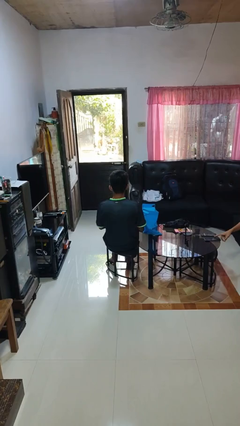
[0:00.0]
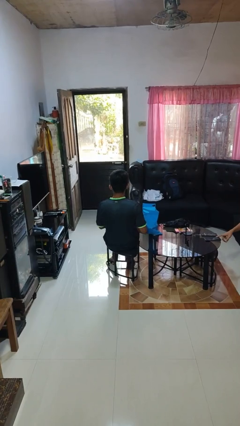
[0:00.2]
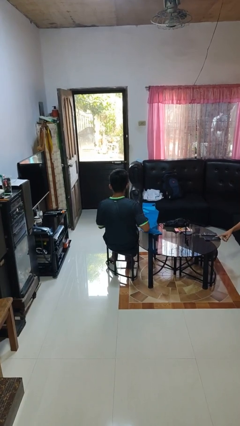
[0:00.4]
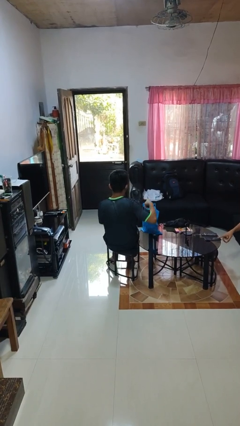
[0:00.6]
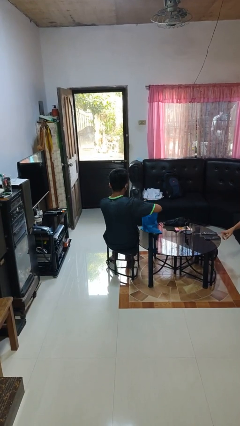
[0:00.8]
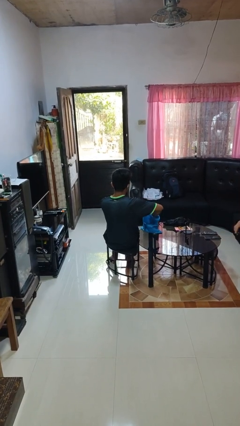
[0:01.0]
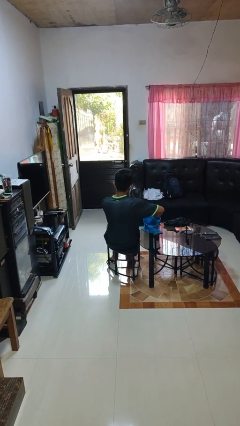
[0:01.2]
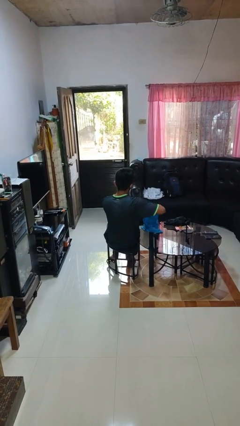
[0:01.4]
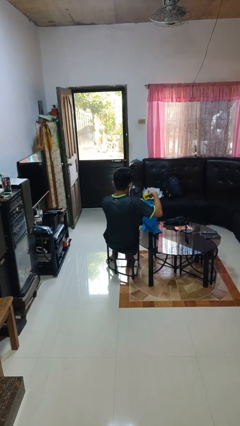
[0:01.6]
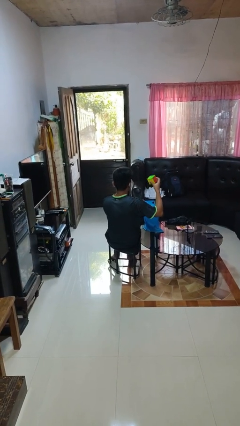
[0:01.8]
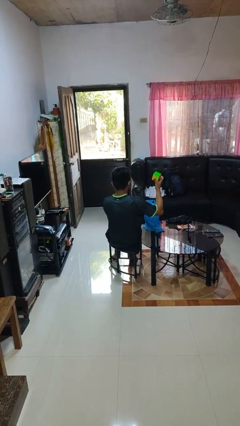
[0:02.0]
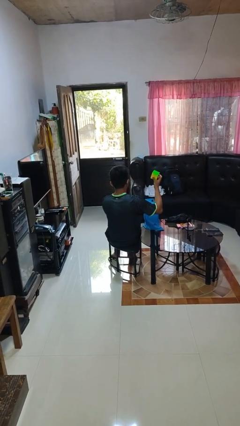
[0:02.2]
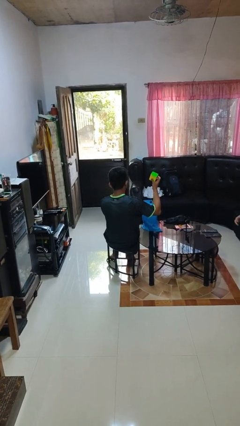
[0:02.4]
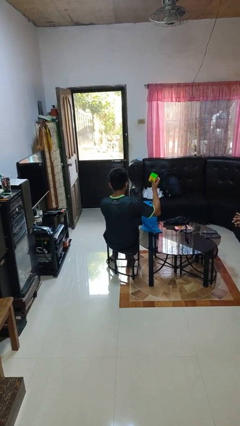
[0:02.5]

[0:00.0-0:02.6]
person takes object from bag

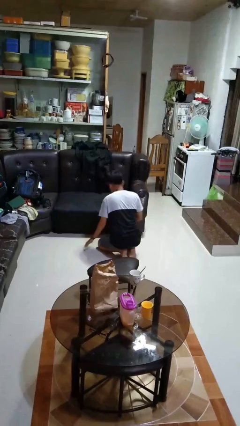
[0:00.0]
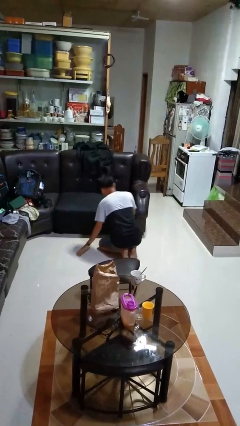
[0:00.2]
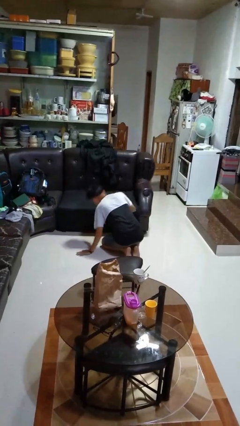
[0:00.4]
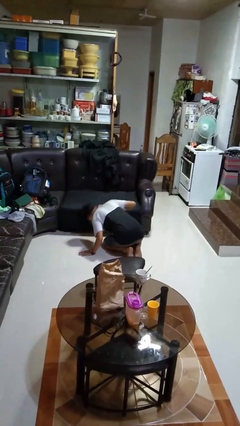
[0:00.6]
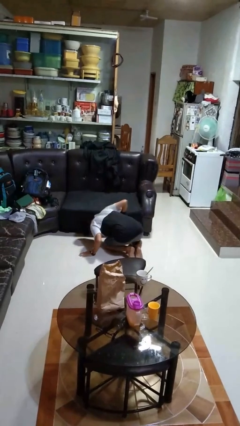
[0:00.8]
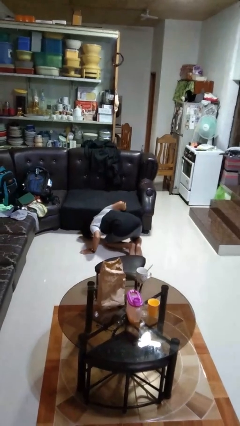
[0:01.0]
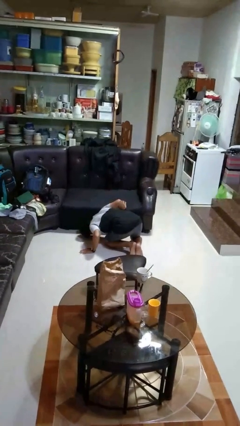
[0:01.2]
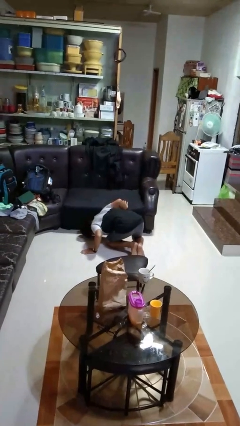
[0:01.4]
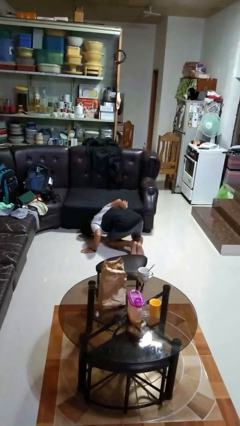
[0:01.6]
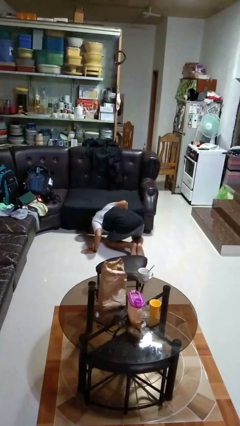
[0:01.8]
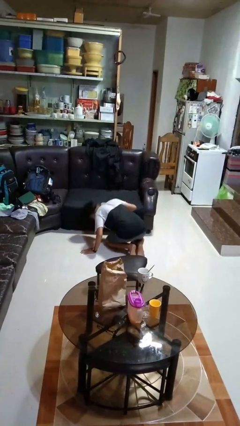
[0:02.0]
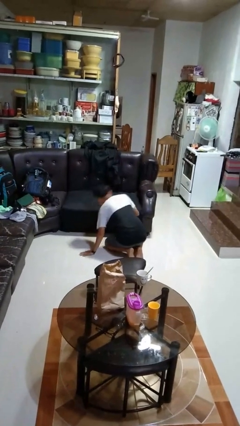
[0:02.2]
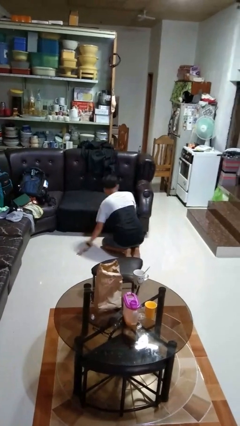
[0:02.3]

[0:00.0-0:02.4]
person searches under couch

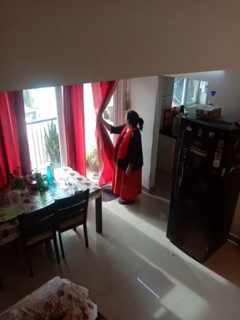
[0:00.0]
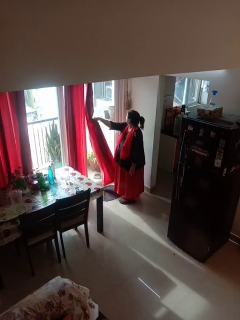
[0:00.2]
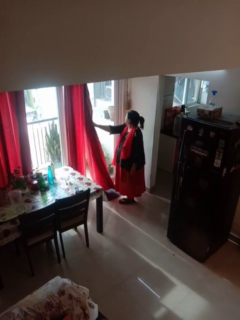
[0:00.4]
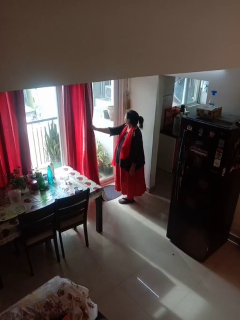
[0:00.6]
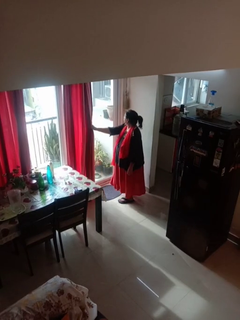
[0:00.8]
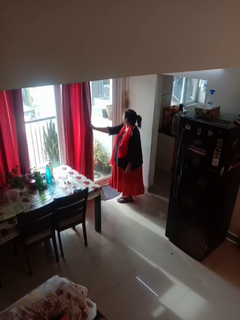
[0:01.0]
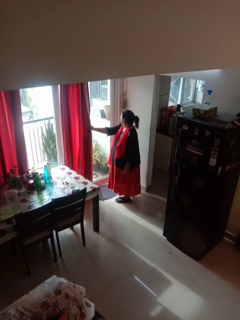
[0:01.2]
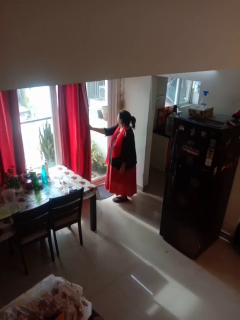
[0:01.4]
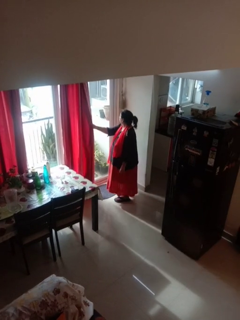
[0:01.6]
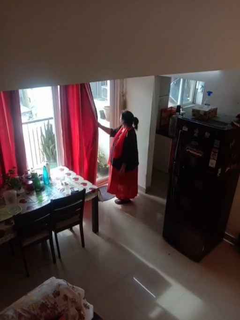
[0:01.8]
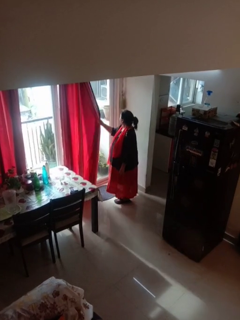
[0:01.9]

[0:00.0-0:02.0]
person opens curtains

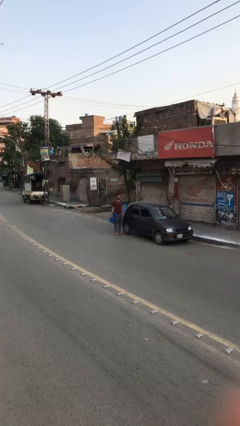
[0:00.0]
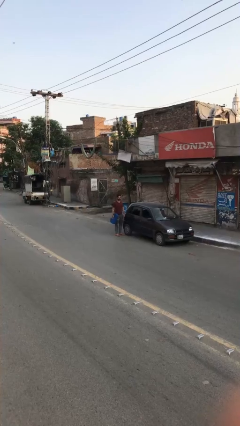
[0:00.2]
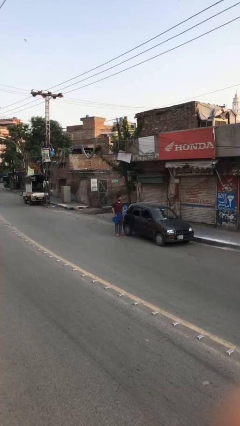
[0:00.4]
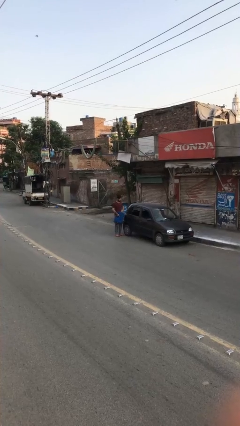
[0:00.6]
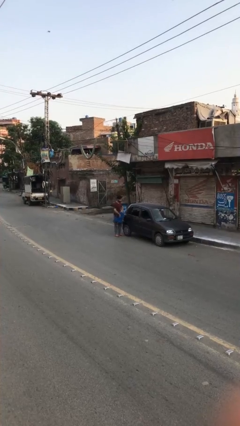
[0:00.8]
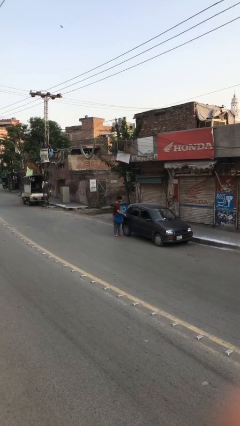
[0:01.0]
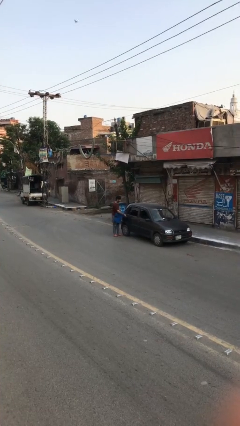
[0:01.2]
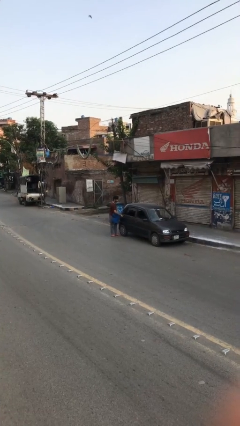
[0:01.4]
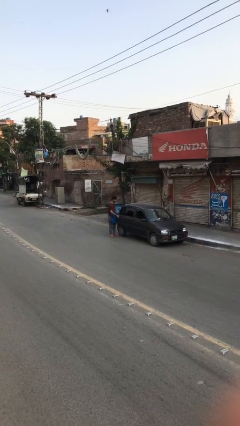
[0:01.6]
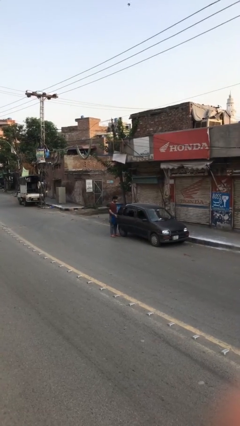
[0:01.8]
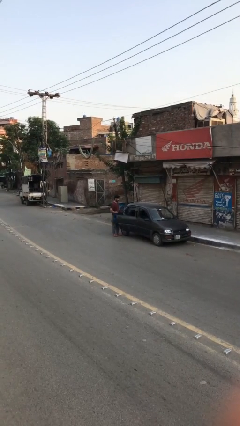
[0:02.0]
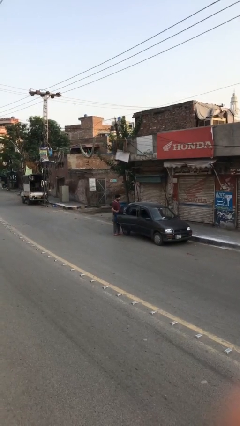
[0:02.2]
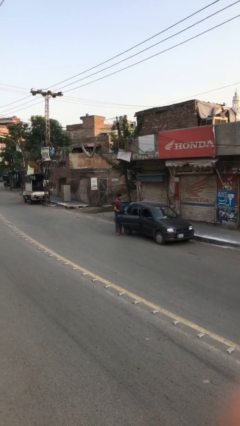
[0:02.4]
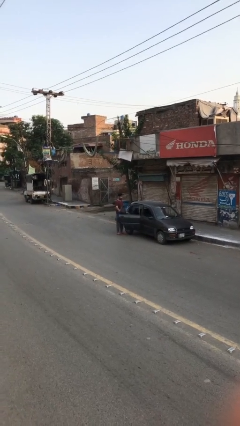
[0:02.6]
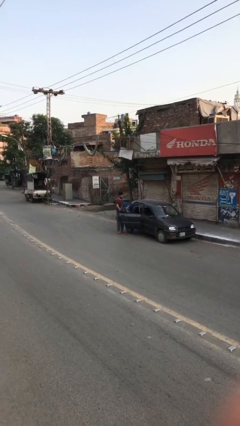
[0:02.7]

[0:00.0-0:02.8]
person opens car door

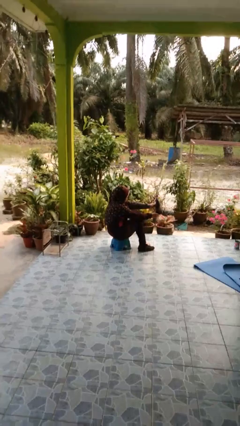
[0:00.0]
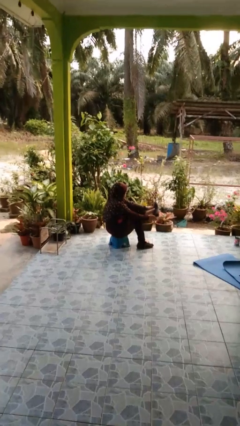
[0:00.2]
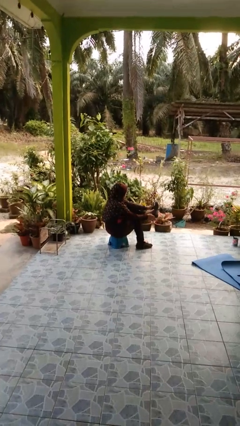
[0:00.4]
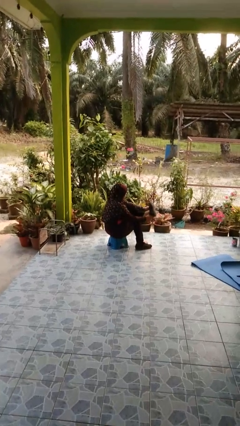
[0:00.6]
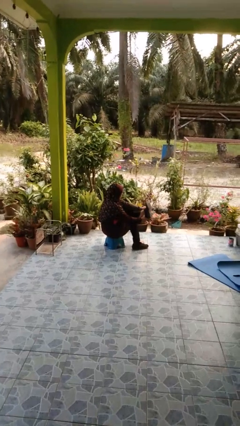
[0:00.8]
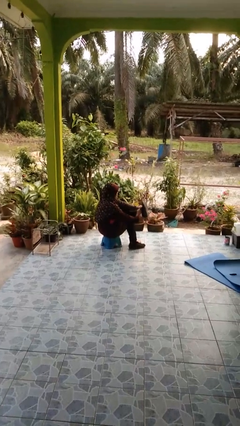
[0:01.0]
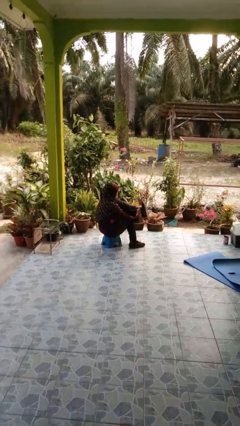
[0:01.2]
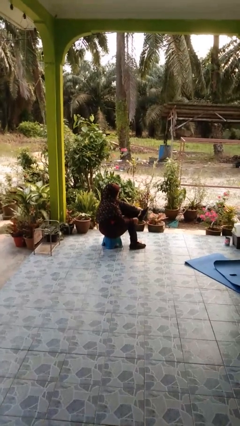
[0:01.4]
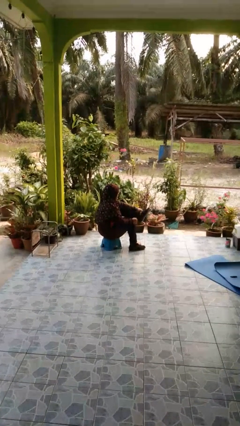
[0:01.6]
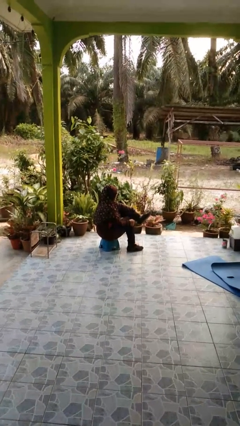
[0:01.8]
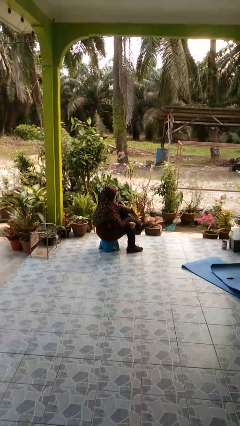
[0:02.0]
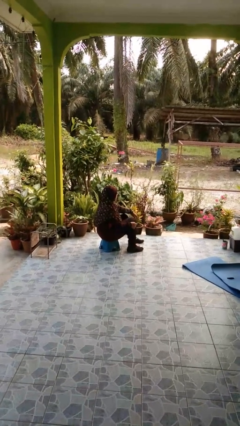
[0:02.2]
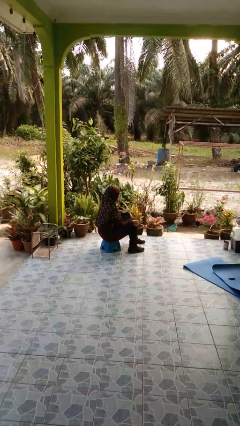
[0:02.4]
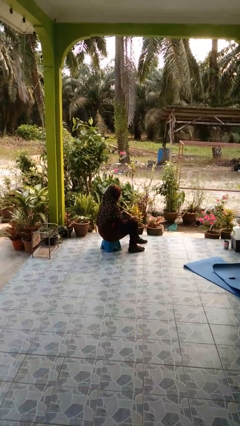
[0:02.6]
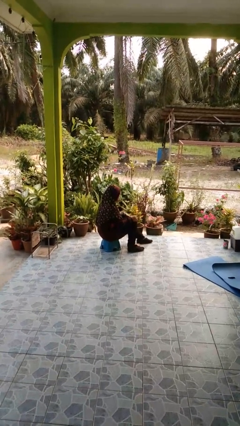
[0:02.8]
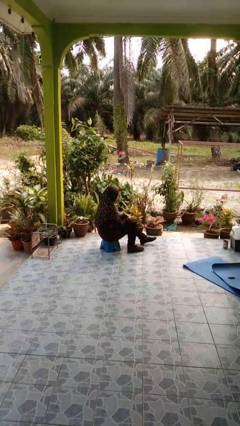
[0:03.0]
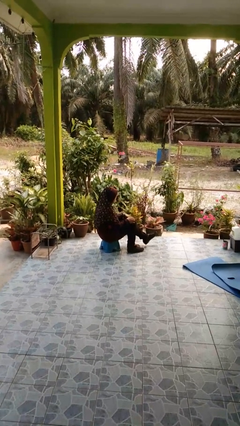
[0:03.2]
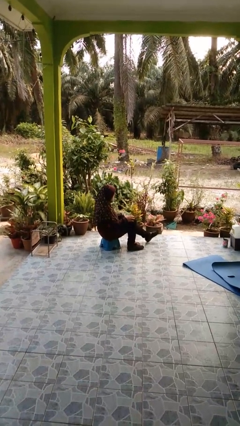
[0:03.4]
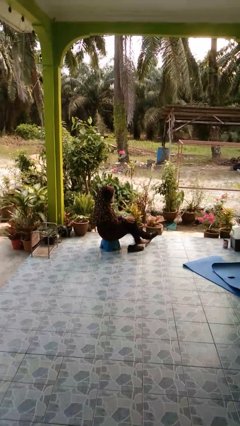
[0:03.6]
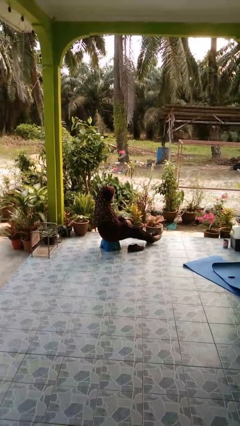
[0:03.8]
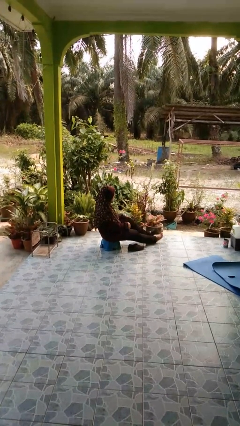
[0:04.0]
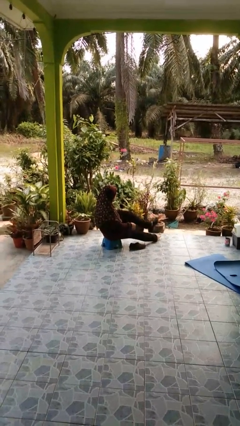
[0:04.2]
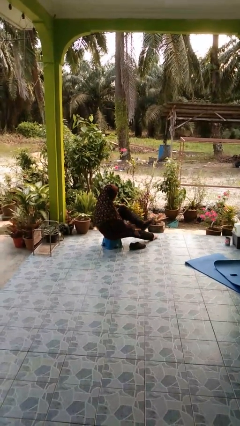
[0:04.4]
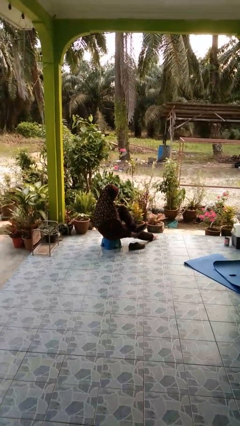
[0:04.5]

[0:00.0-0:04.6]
person puts on shoes

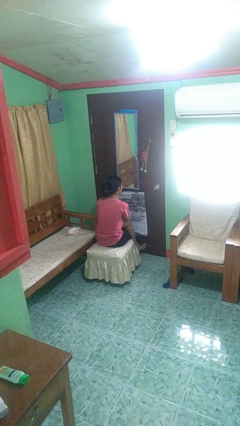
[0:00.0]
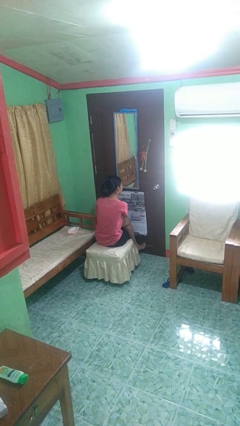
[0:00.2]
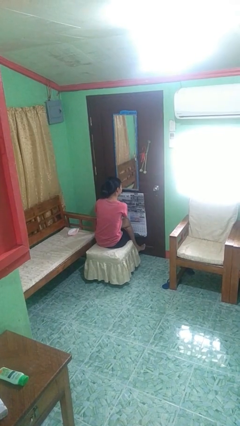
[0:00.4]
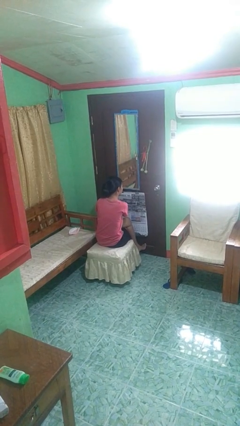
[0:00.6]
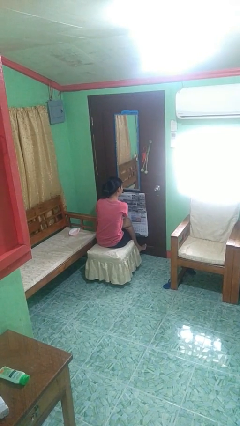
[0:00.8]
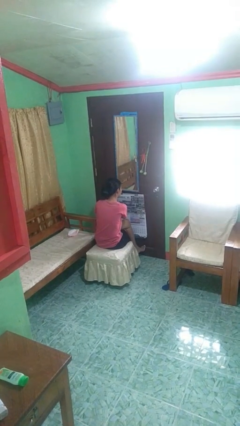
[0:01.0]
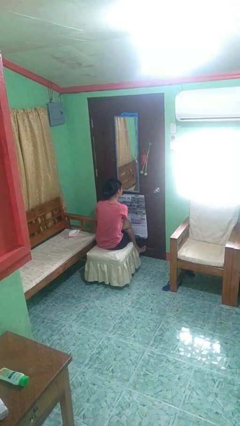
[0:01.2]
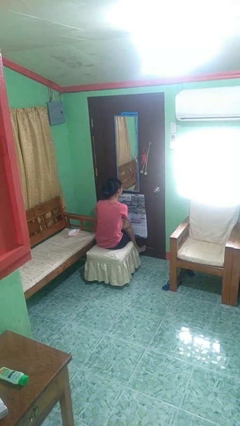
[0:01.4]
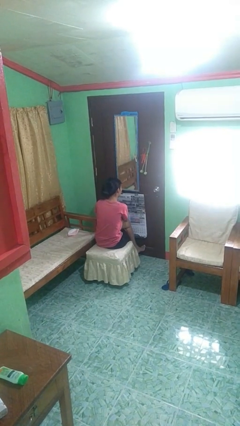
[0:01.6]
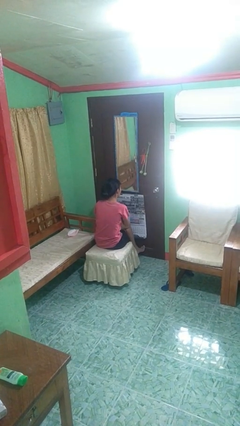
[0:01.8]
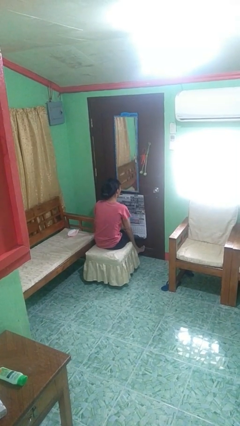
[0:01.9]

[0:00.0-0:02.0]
person puts on earrings

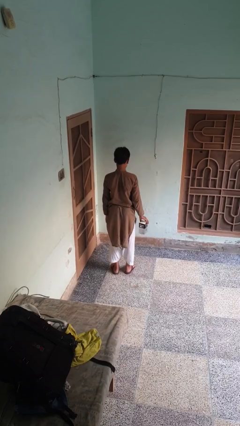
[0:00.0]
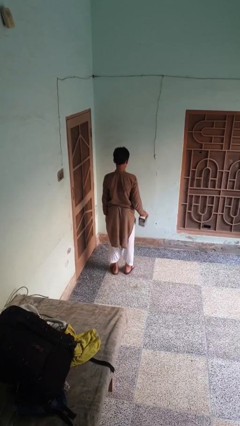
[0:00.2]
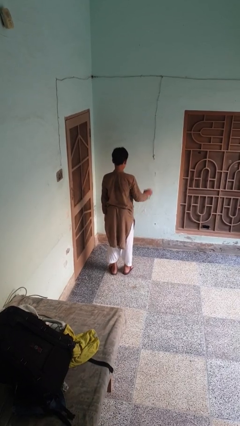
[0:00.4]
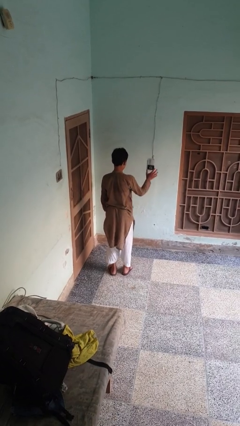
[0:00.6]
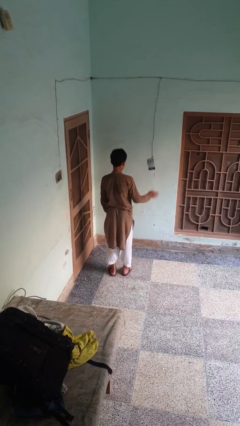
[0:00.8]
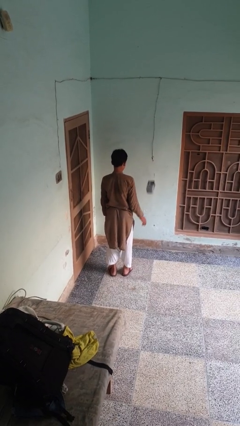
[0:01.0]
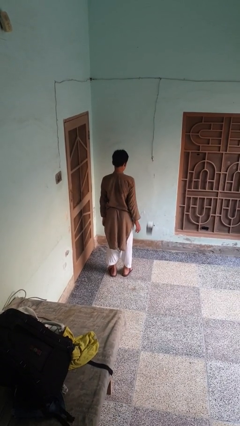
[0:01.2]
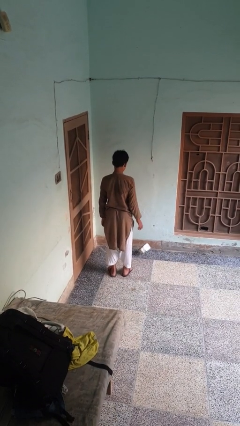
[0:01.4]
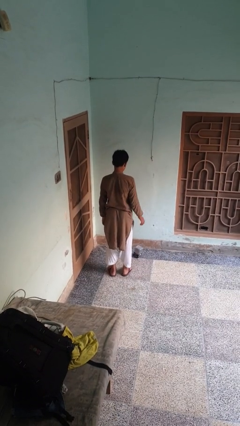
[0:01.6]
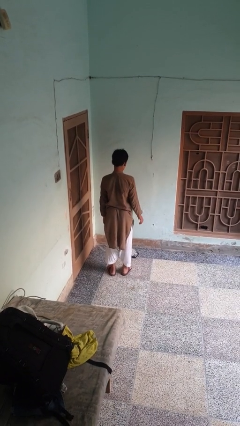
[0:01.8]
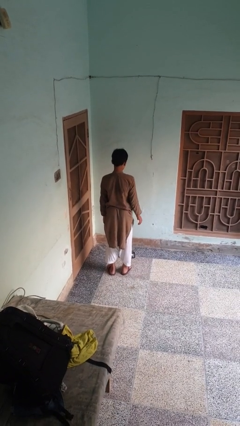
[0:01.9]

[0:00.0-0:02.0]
person throws object into air
